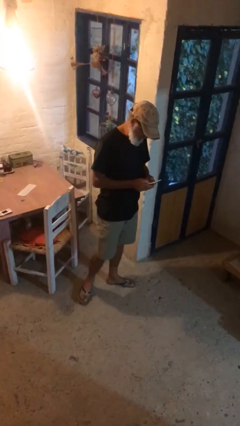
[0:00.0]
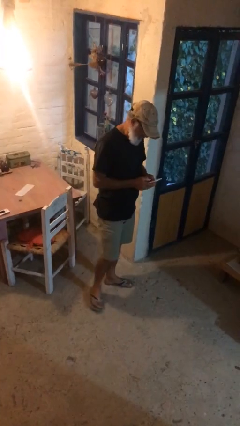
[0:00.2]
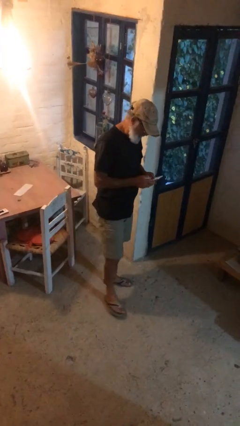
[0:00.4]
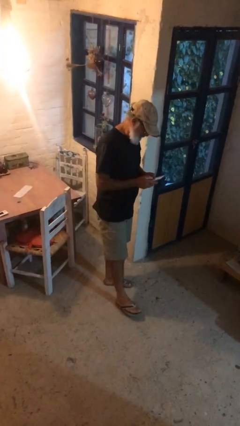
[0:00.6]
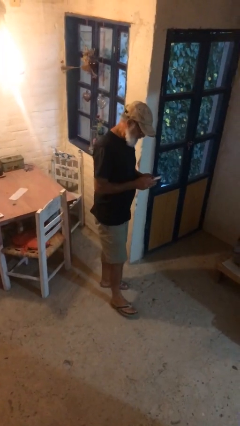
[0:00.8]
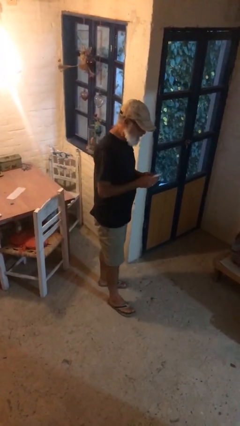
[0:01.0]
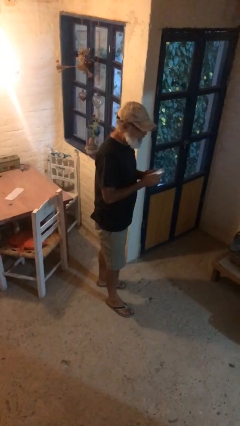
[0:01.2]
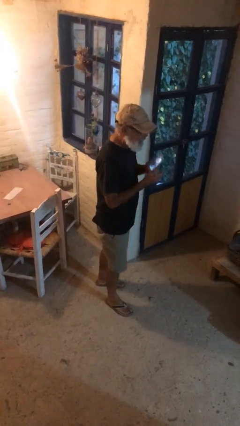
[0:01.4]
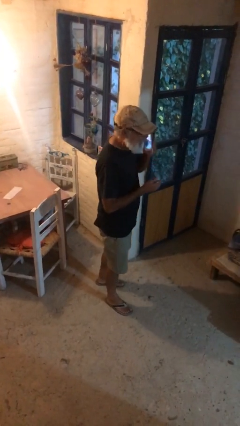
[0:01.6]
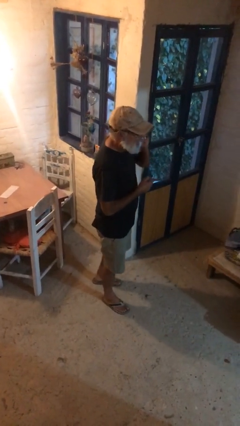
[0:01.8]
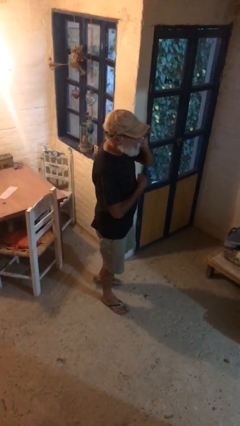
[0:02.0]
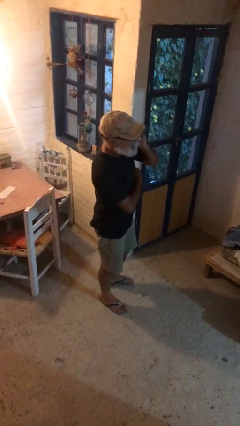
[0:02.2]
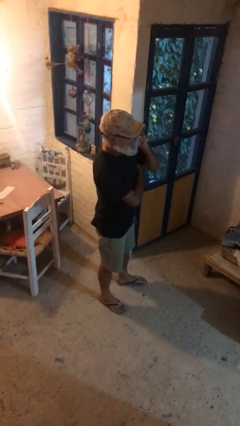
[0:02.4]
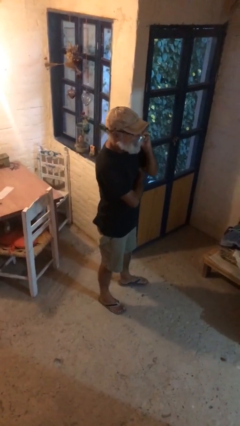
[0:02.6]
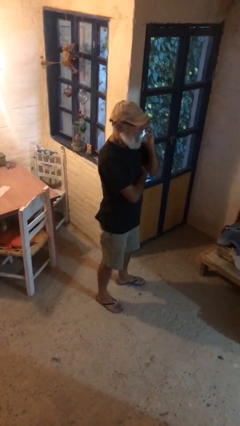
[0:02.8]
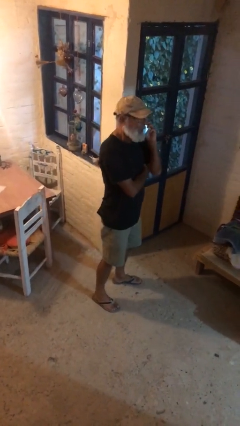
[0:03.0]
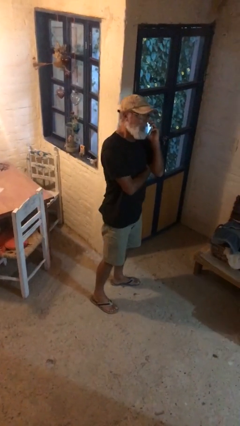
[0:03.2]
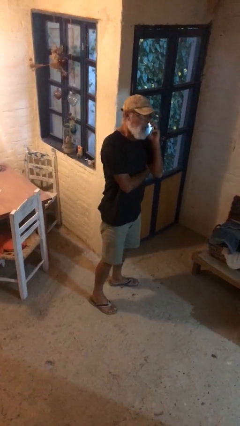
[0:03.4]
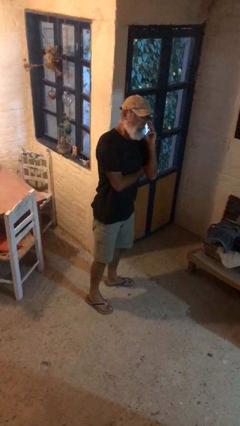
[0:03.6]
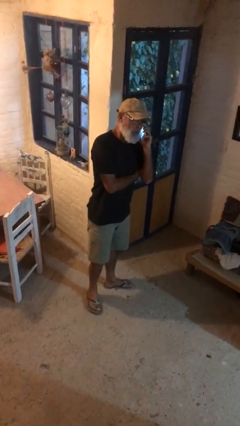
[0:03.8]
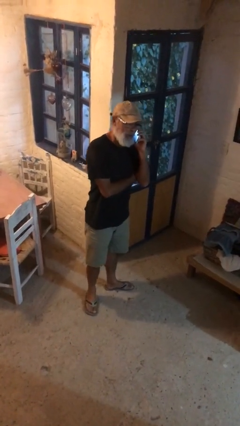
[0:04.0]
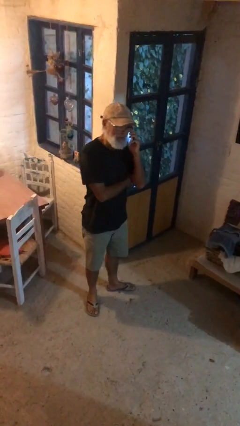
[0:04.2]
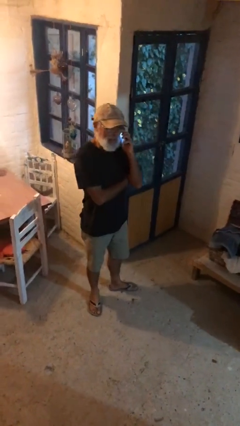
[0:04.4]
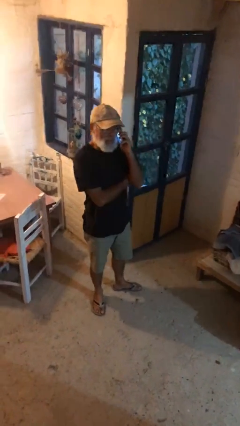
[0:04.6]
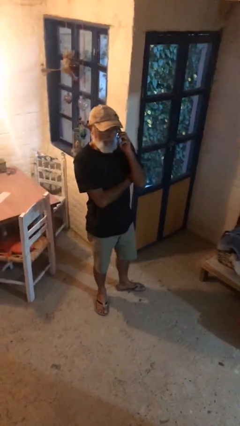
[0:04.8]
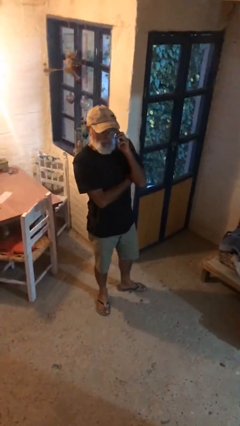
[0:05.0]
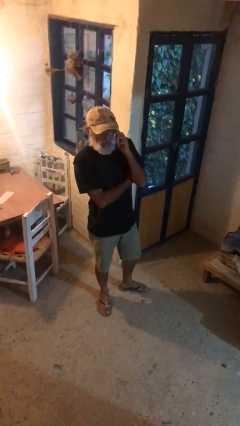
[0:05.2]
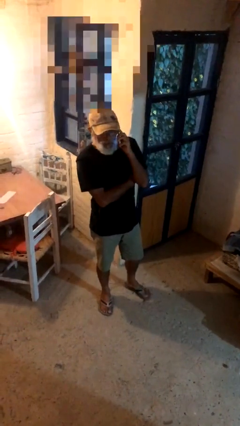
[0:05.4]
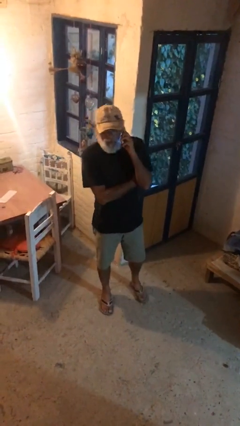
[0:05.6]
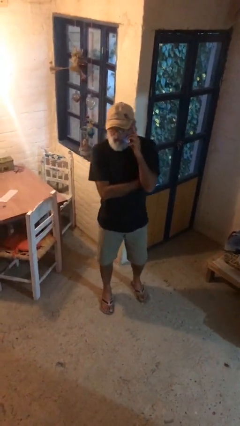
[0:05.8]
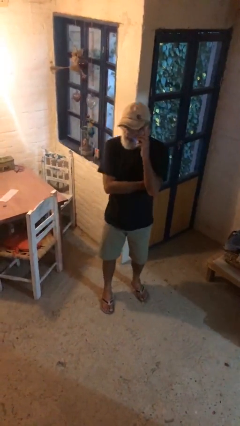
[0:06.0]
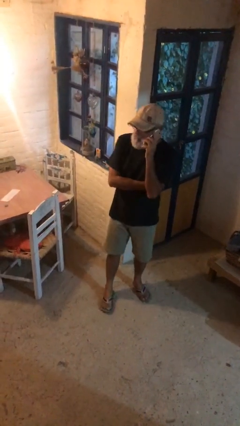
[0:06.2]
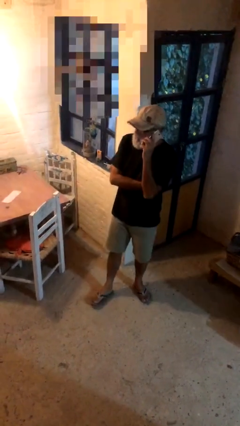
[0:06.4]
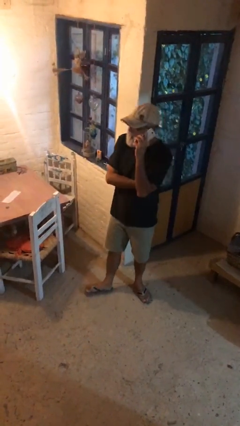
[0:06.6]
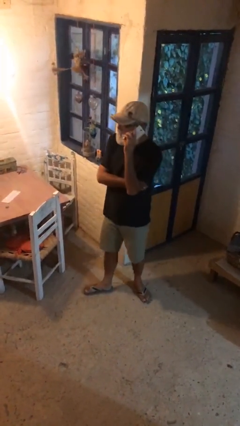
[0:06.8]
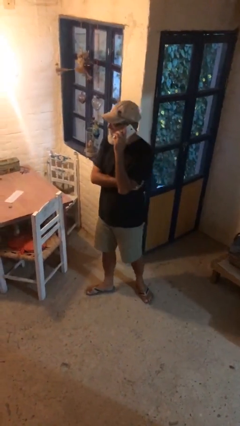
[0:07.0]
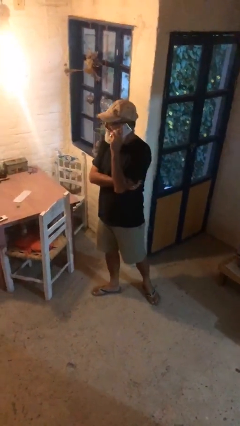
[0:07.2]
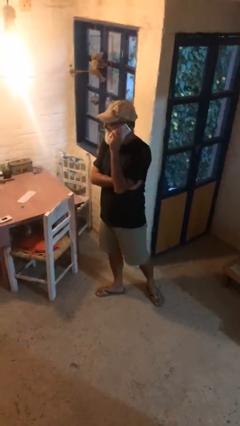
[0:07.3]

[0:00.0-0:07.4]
person talks on phone

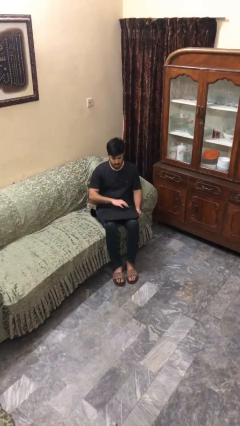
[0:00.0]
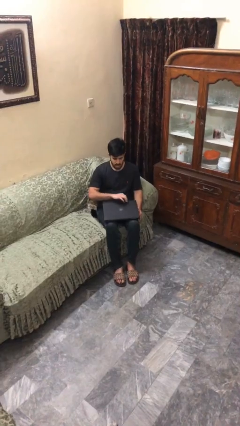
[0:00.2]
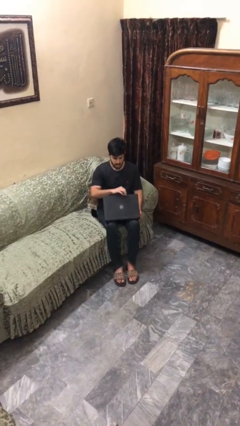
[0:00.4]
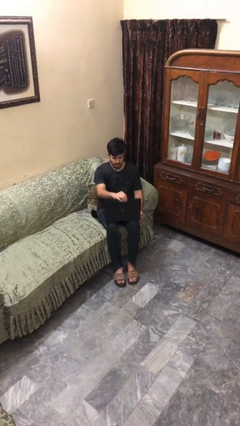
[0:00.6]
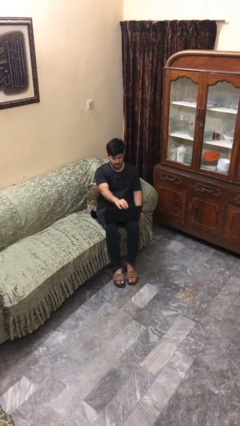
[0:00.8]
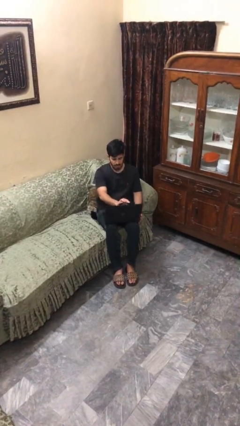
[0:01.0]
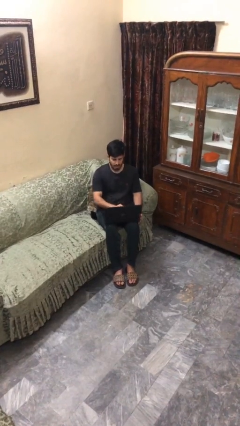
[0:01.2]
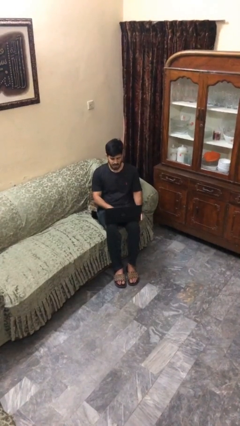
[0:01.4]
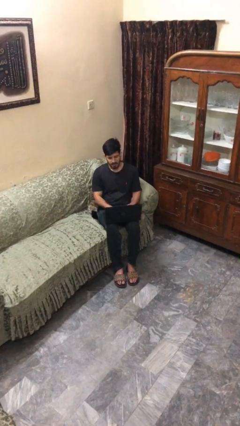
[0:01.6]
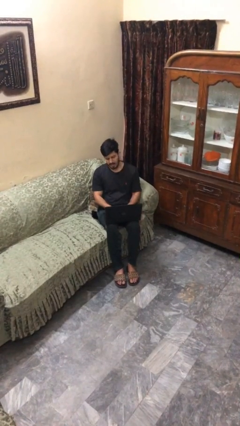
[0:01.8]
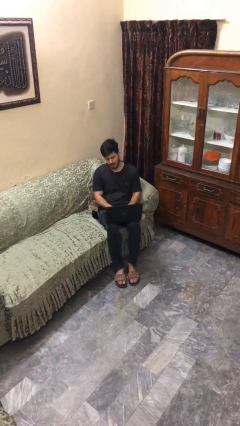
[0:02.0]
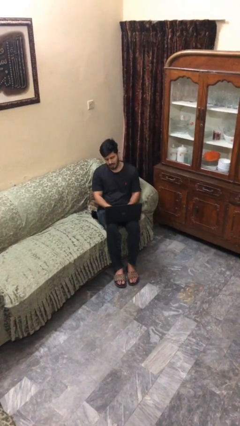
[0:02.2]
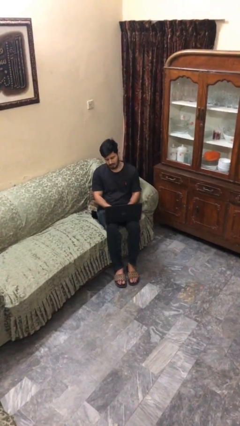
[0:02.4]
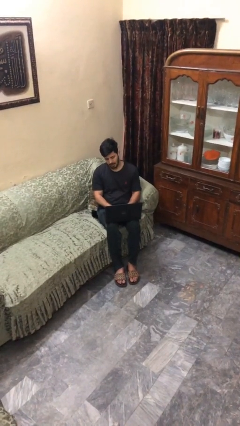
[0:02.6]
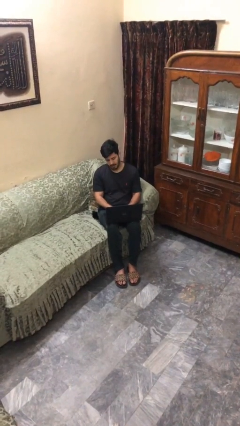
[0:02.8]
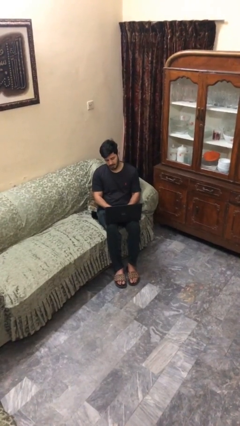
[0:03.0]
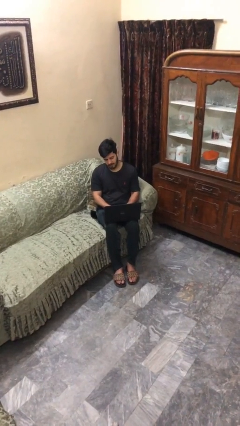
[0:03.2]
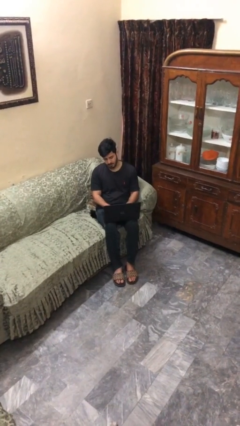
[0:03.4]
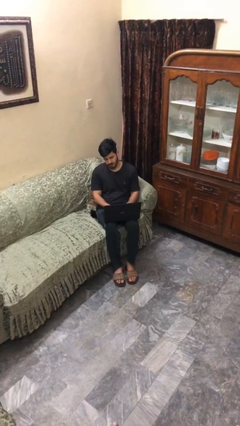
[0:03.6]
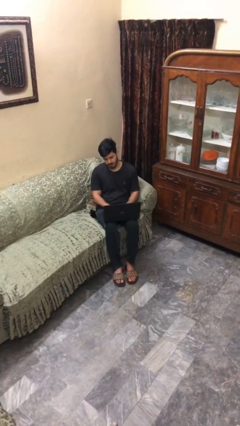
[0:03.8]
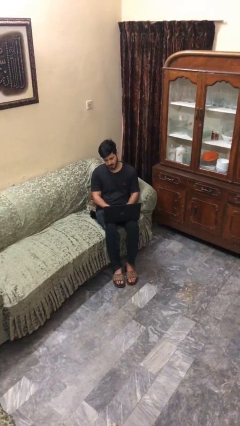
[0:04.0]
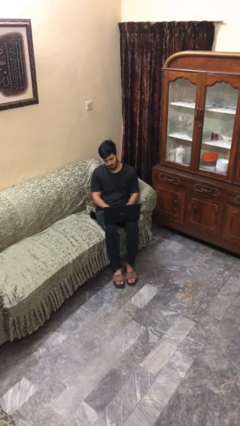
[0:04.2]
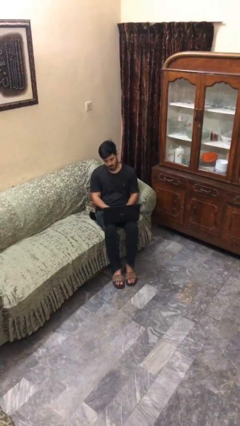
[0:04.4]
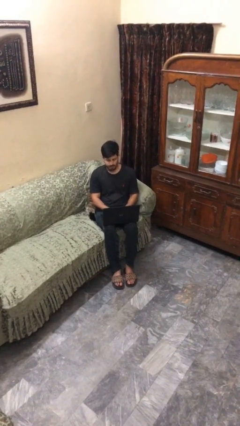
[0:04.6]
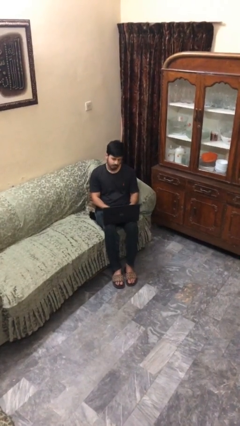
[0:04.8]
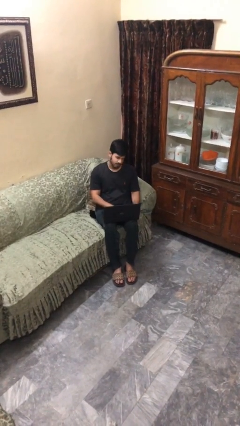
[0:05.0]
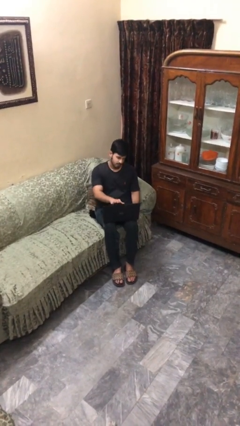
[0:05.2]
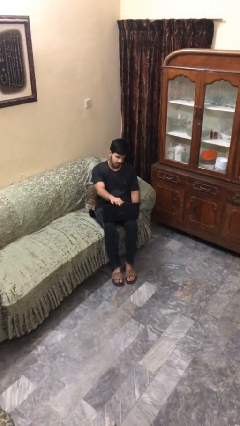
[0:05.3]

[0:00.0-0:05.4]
person interacts with laptop

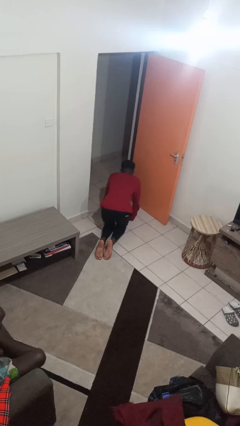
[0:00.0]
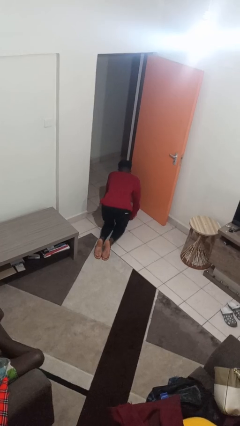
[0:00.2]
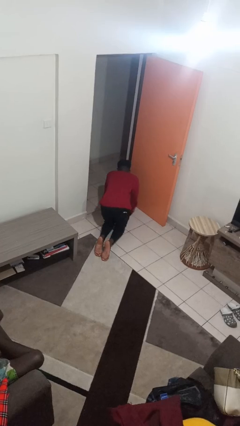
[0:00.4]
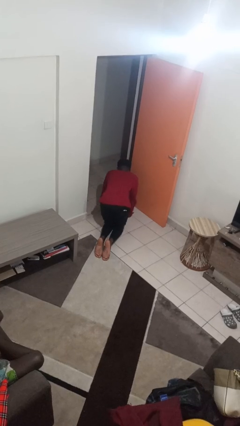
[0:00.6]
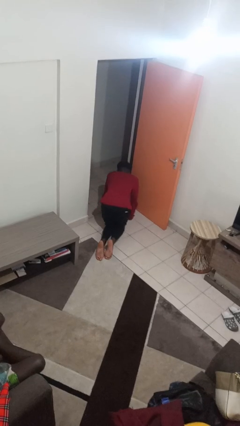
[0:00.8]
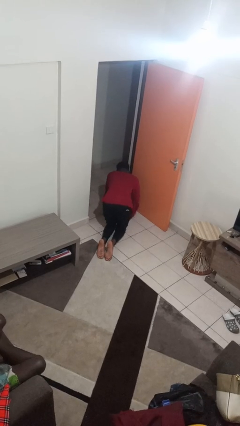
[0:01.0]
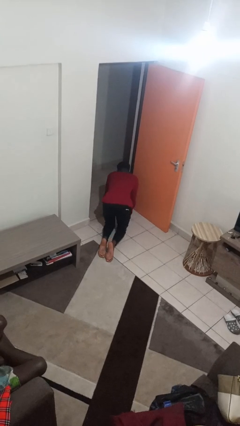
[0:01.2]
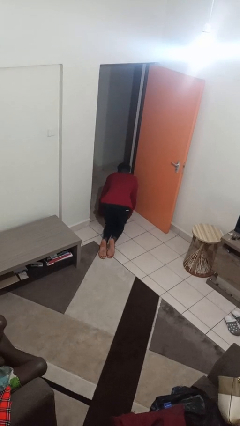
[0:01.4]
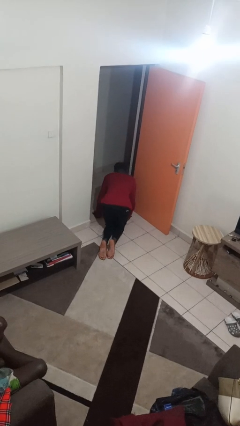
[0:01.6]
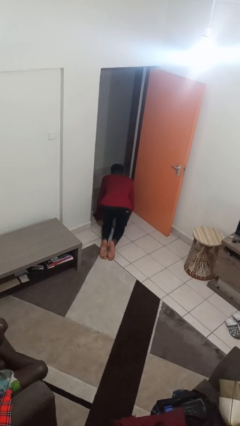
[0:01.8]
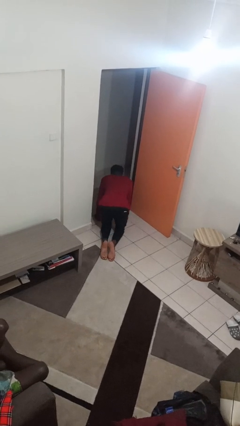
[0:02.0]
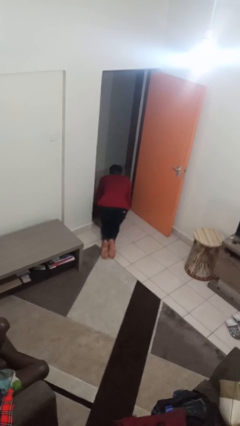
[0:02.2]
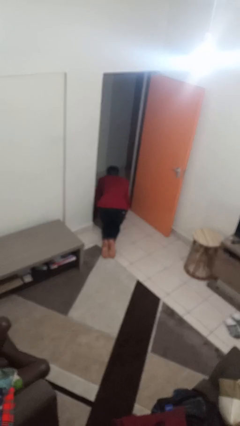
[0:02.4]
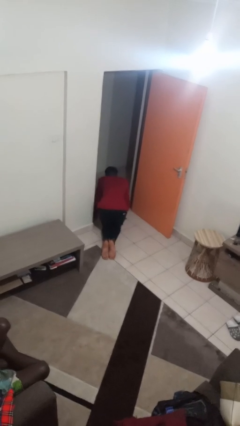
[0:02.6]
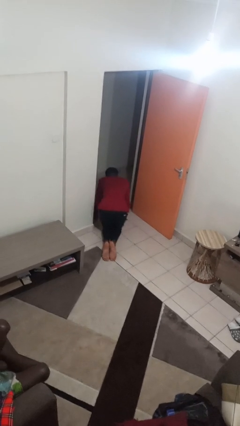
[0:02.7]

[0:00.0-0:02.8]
person crawls

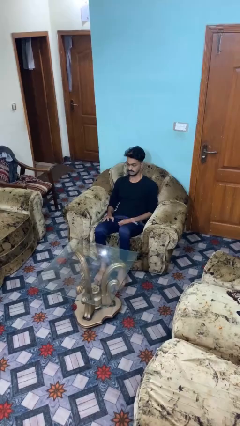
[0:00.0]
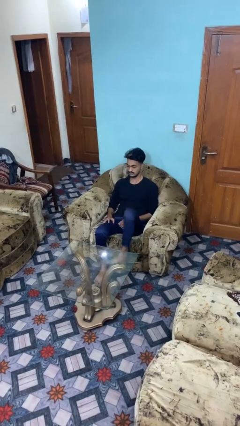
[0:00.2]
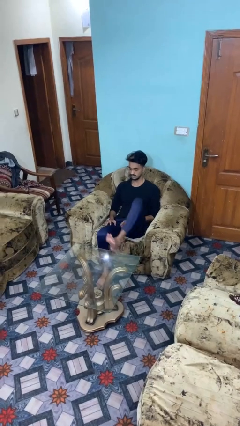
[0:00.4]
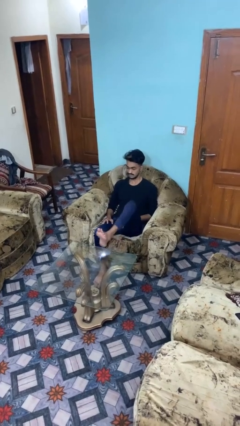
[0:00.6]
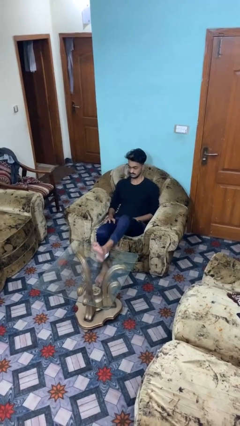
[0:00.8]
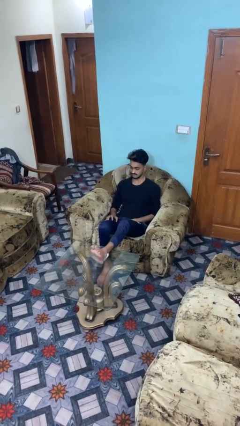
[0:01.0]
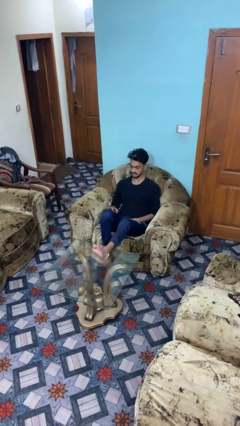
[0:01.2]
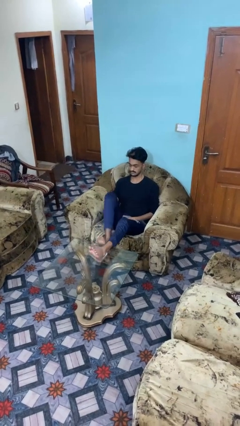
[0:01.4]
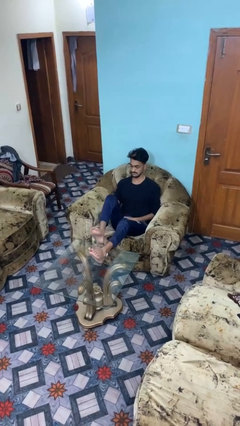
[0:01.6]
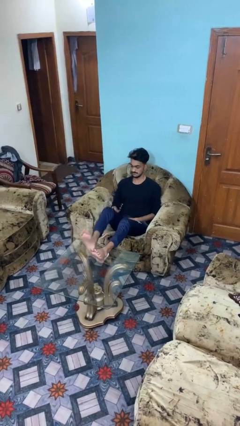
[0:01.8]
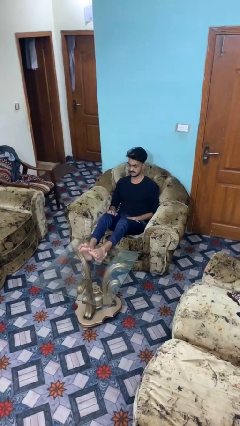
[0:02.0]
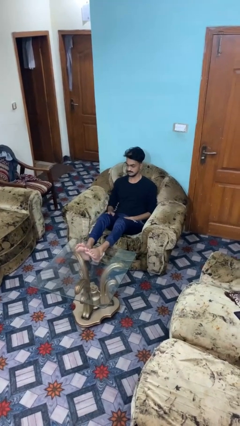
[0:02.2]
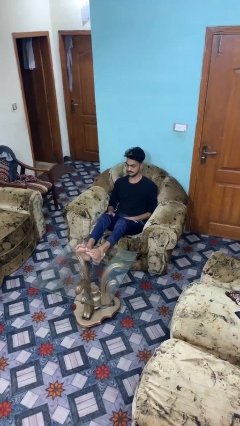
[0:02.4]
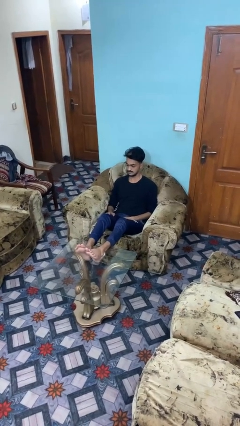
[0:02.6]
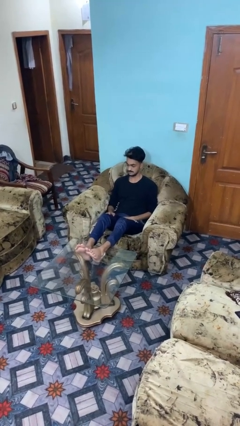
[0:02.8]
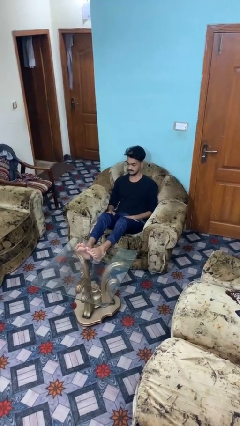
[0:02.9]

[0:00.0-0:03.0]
person puts feet up
